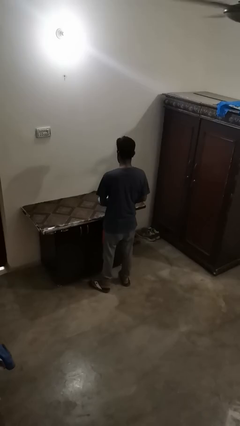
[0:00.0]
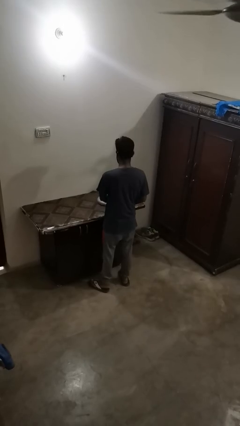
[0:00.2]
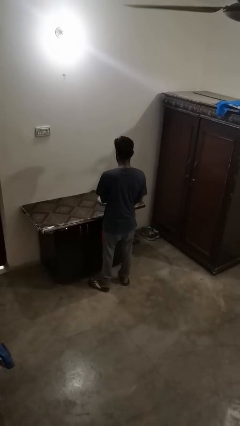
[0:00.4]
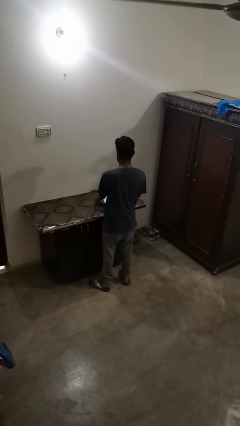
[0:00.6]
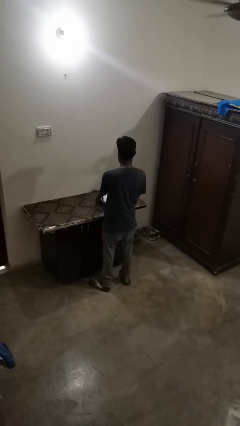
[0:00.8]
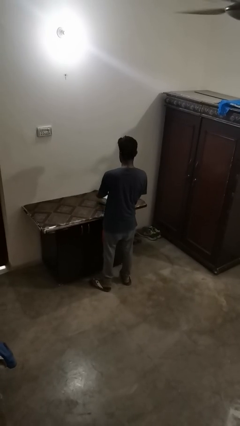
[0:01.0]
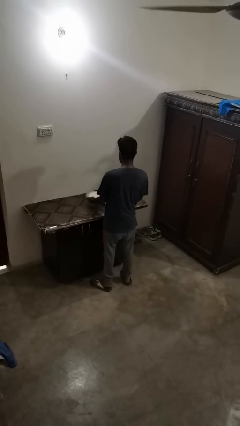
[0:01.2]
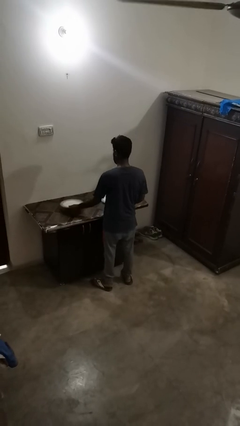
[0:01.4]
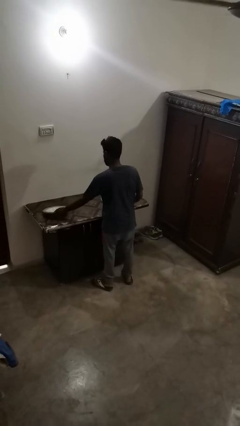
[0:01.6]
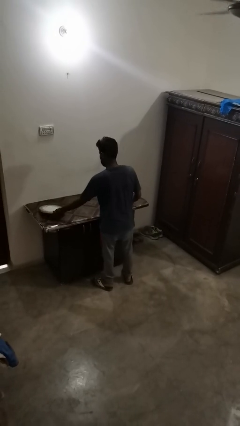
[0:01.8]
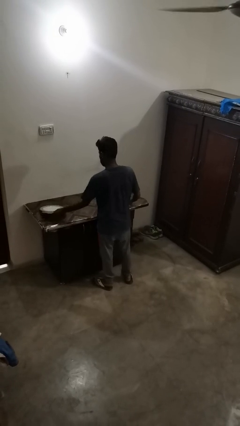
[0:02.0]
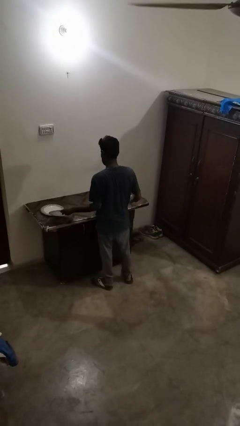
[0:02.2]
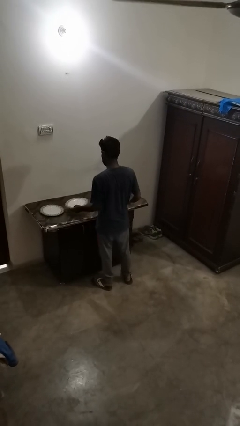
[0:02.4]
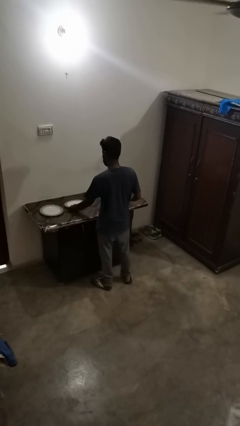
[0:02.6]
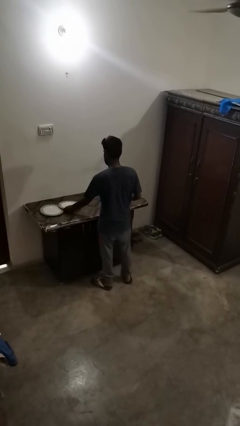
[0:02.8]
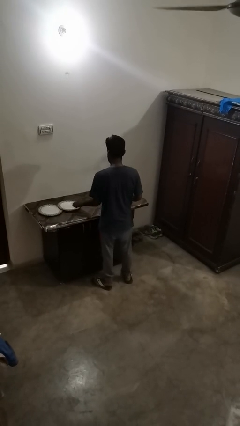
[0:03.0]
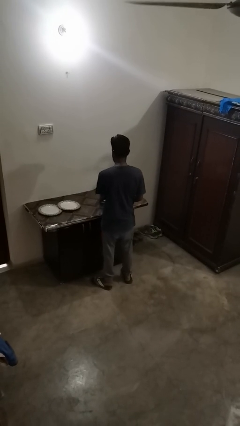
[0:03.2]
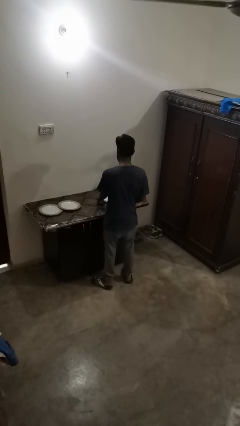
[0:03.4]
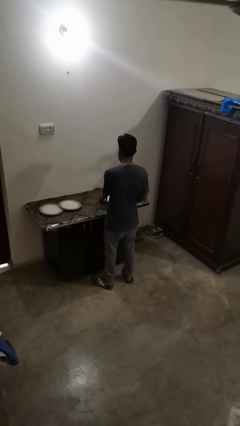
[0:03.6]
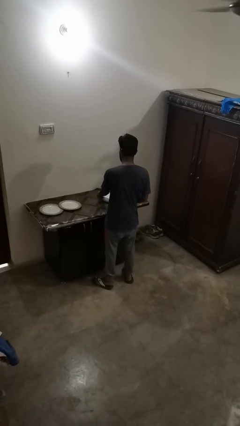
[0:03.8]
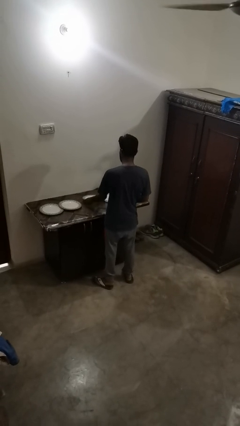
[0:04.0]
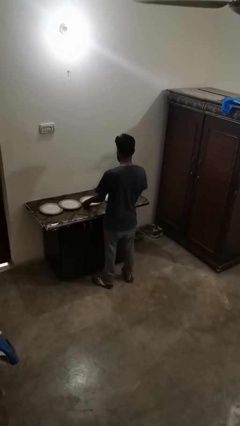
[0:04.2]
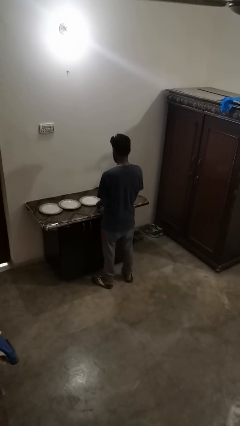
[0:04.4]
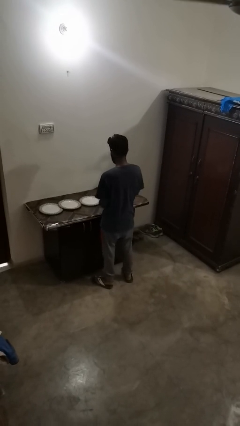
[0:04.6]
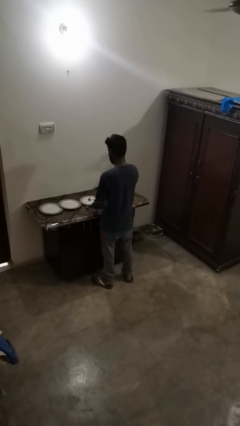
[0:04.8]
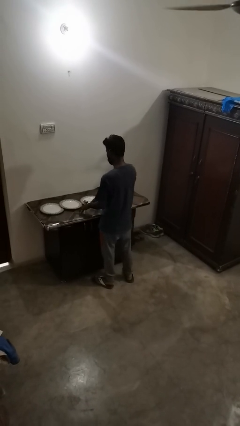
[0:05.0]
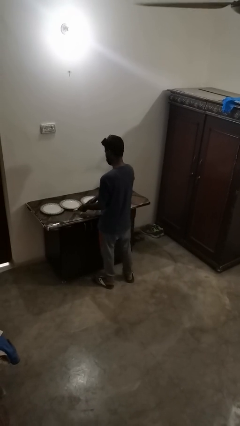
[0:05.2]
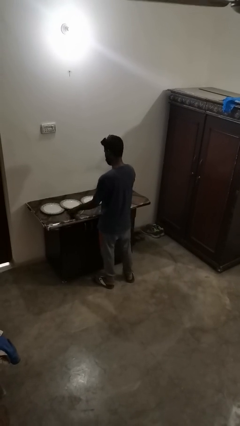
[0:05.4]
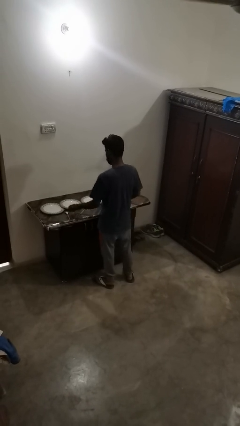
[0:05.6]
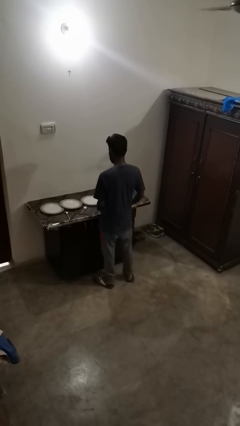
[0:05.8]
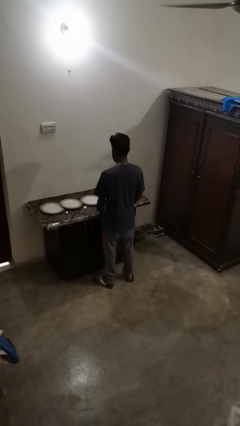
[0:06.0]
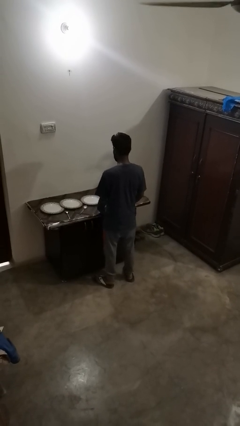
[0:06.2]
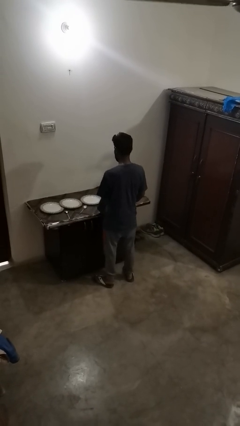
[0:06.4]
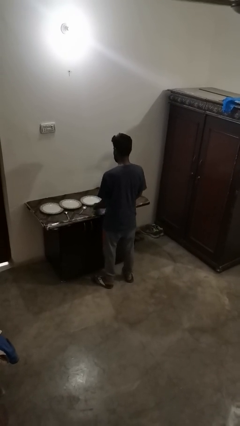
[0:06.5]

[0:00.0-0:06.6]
person sets table

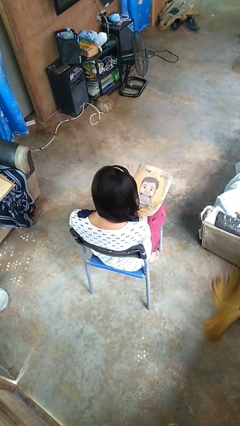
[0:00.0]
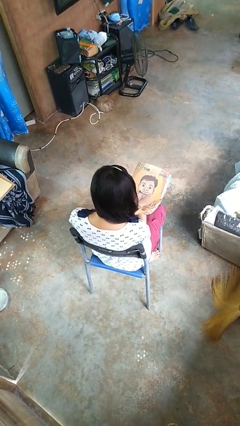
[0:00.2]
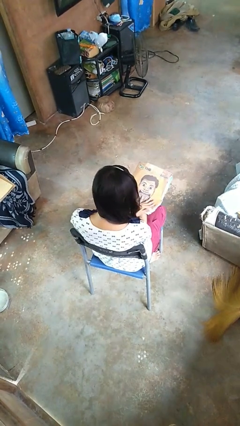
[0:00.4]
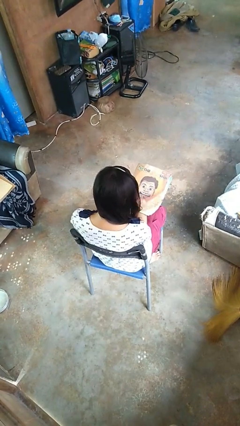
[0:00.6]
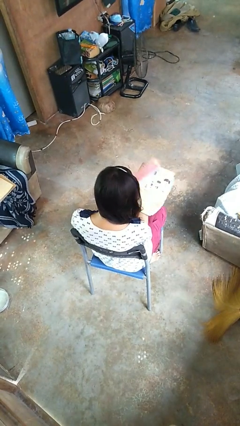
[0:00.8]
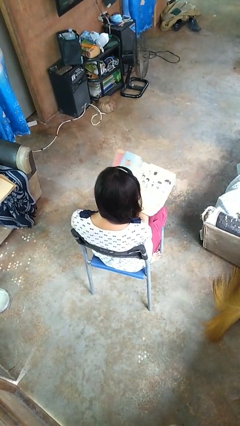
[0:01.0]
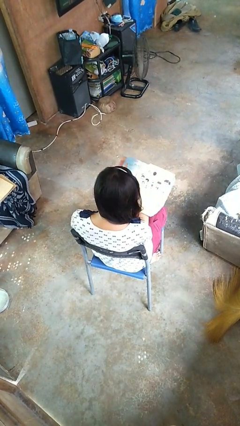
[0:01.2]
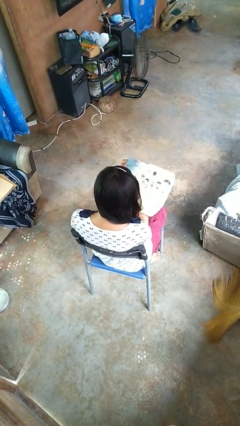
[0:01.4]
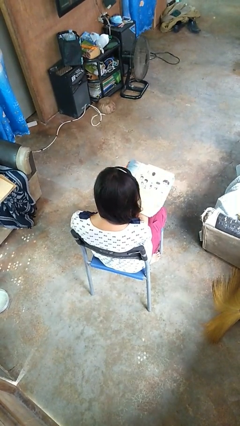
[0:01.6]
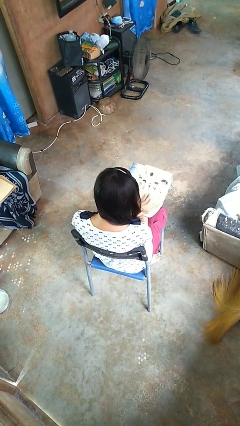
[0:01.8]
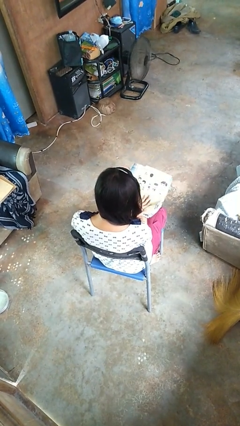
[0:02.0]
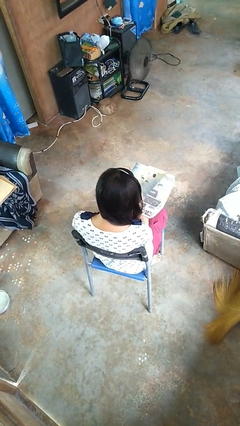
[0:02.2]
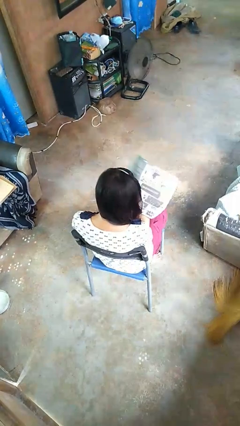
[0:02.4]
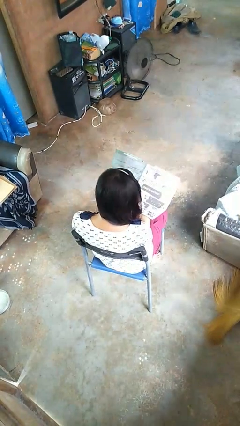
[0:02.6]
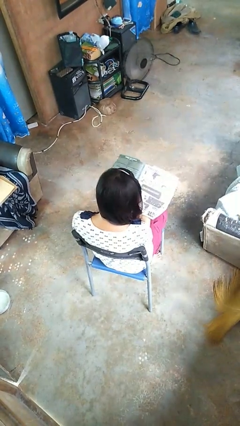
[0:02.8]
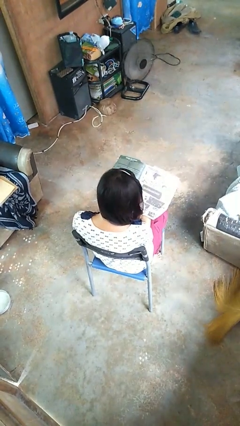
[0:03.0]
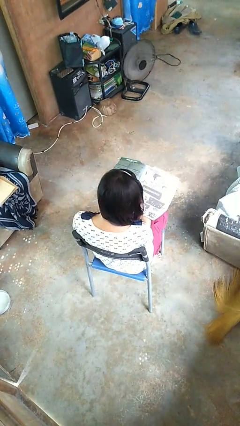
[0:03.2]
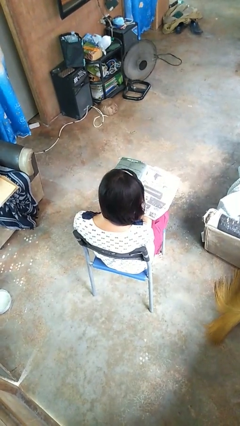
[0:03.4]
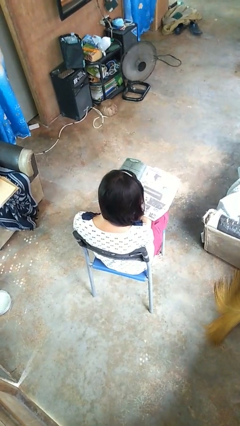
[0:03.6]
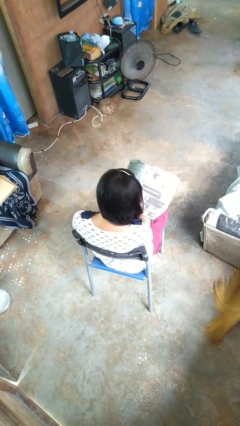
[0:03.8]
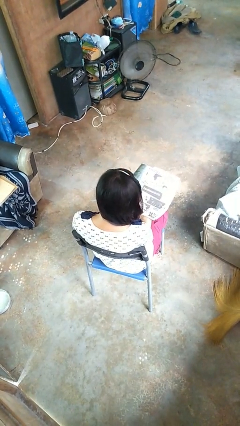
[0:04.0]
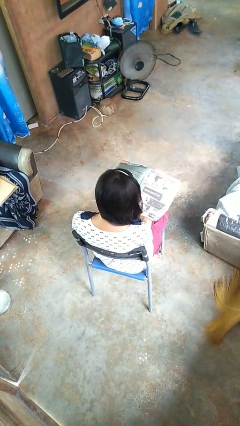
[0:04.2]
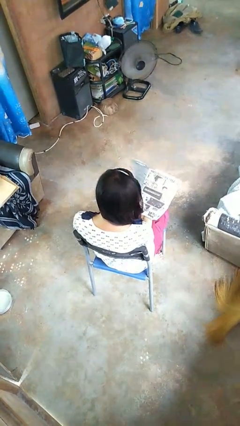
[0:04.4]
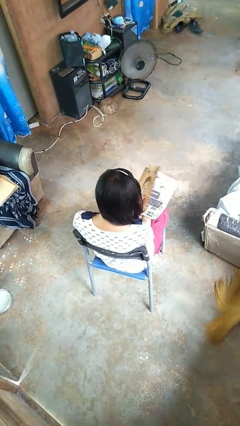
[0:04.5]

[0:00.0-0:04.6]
person reads magazine

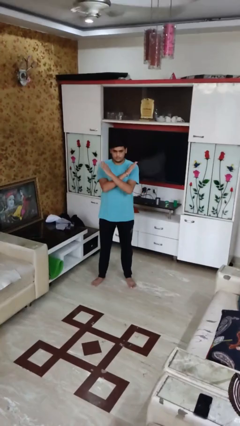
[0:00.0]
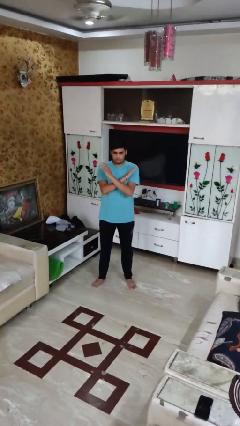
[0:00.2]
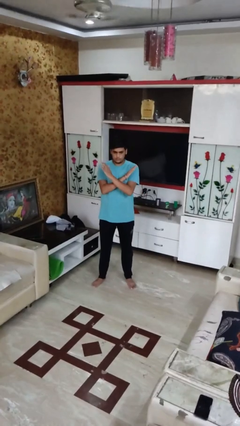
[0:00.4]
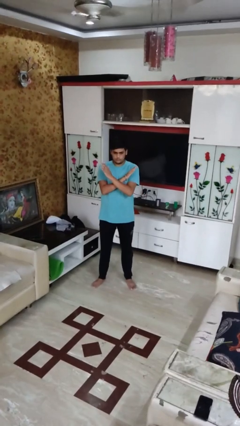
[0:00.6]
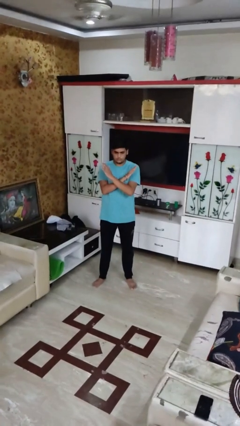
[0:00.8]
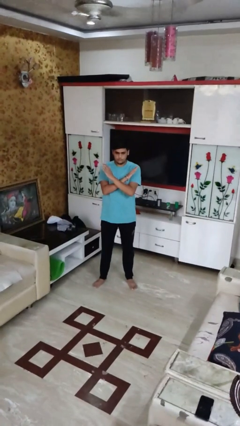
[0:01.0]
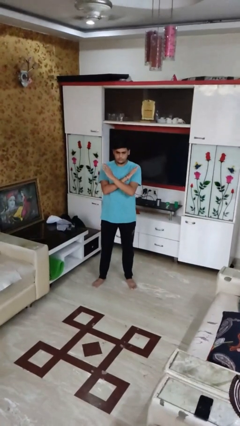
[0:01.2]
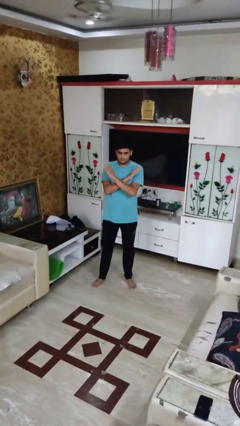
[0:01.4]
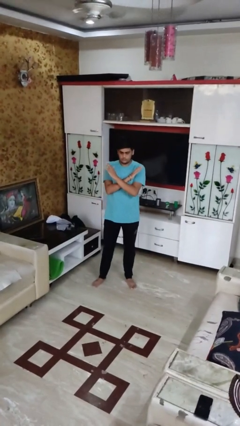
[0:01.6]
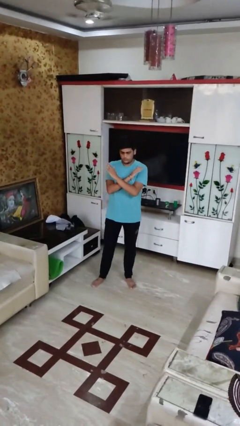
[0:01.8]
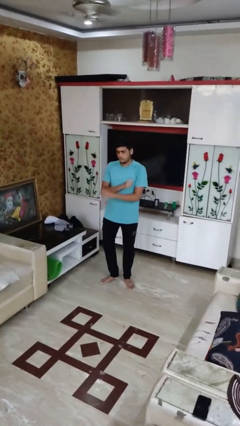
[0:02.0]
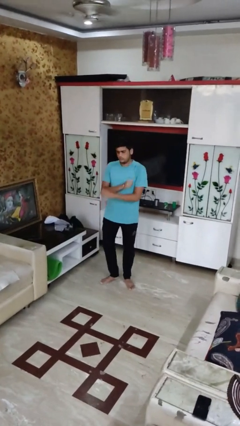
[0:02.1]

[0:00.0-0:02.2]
person gestures arms x

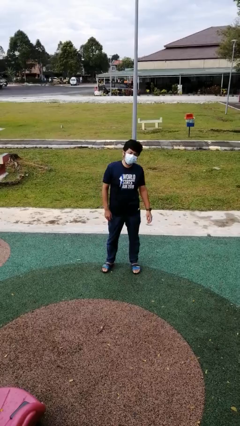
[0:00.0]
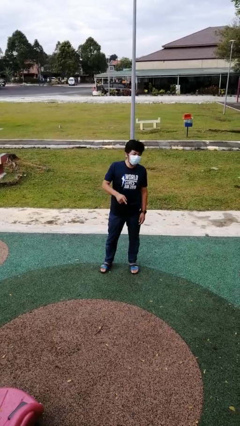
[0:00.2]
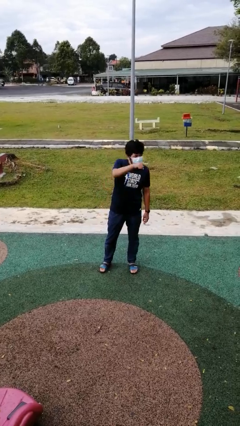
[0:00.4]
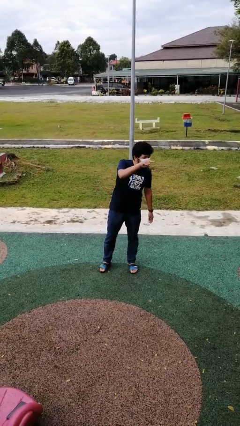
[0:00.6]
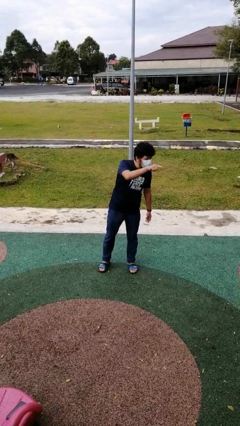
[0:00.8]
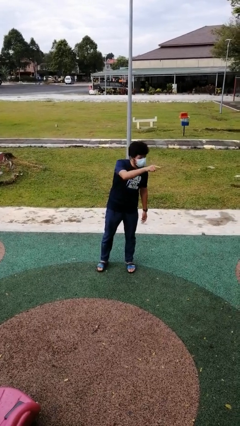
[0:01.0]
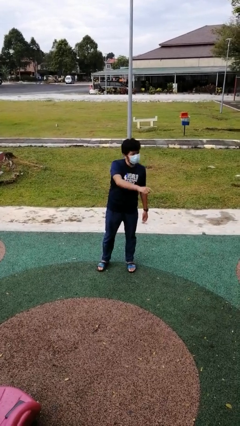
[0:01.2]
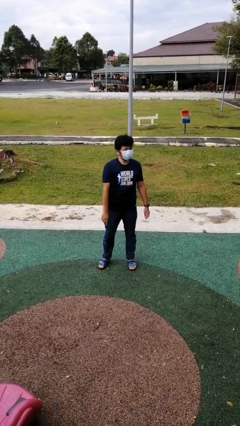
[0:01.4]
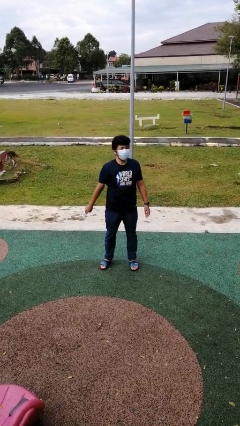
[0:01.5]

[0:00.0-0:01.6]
person points at person

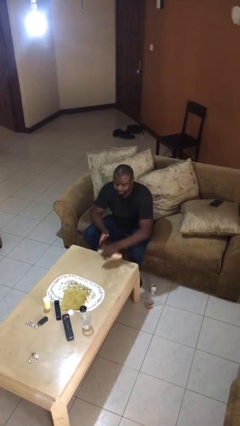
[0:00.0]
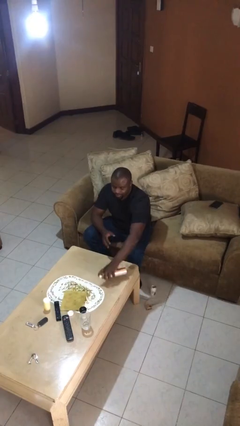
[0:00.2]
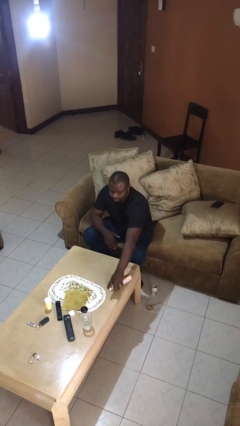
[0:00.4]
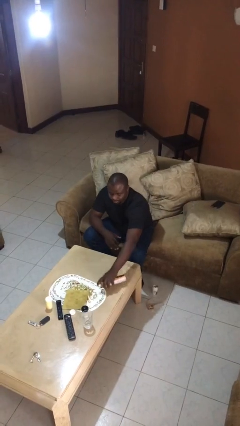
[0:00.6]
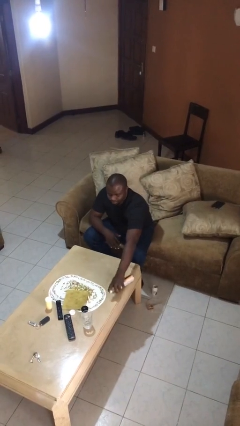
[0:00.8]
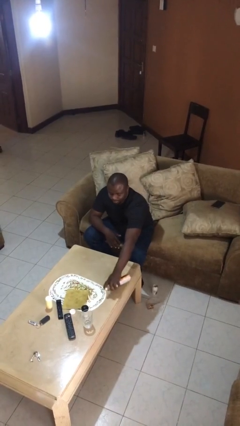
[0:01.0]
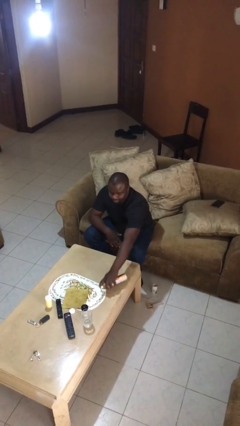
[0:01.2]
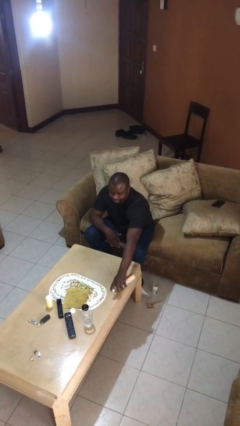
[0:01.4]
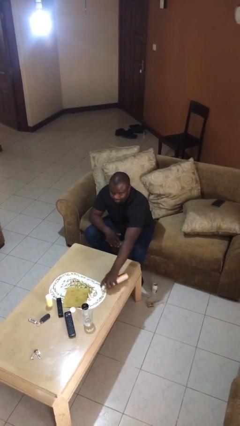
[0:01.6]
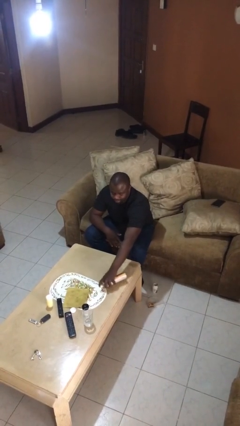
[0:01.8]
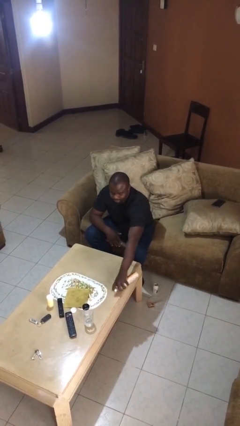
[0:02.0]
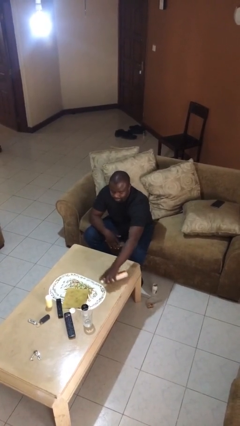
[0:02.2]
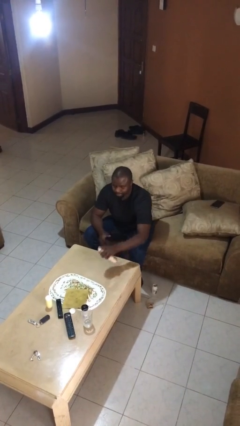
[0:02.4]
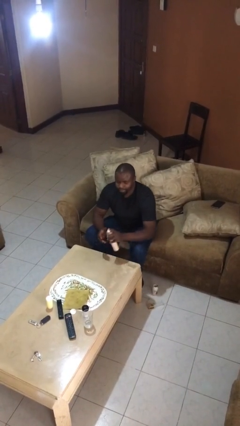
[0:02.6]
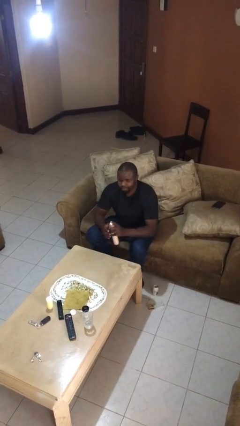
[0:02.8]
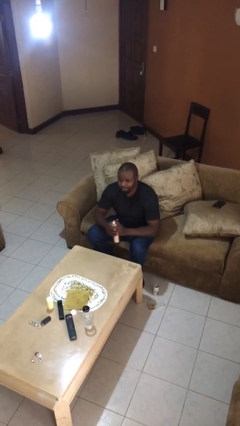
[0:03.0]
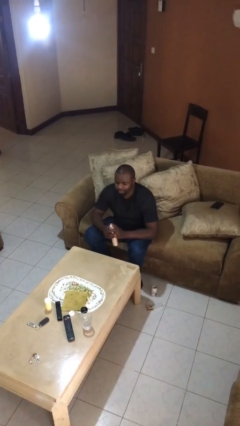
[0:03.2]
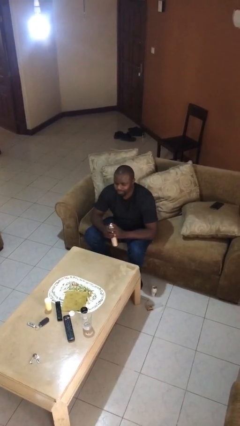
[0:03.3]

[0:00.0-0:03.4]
person sprays from bottle
